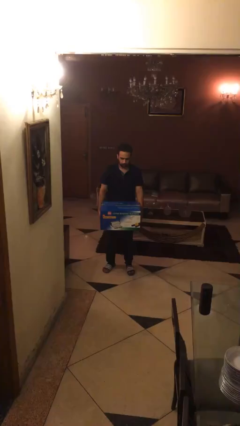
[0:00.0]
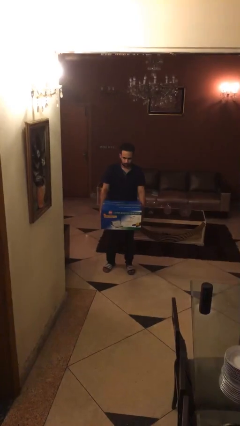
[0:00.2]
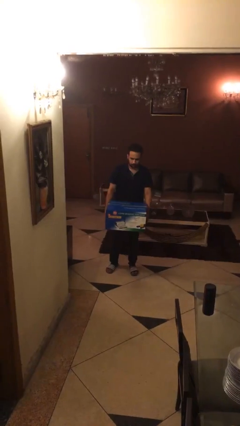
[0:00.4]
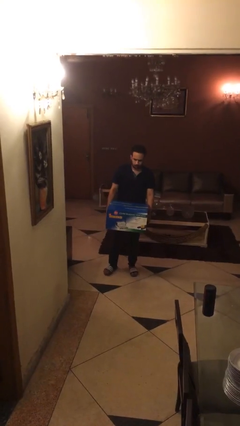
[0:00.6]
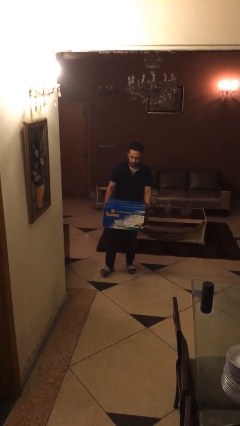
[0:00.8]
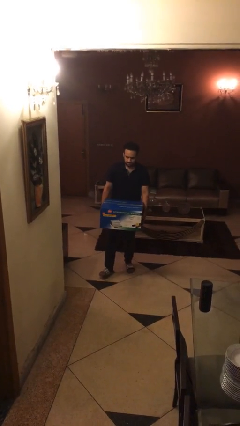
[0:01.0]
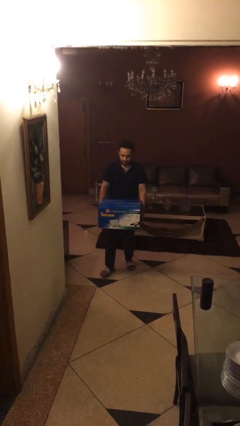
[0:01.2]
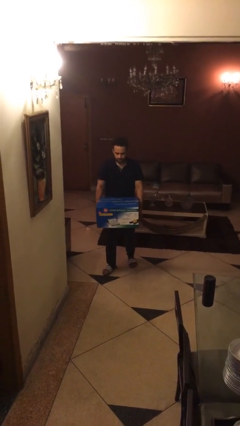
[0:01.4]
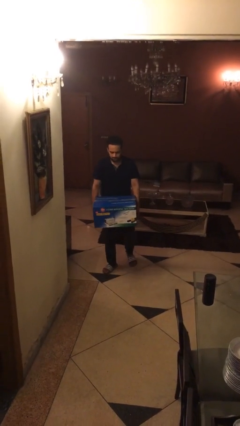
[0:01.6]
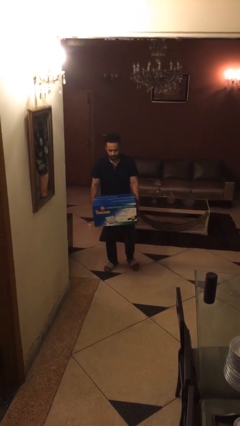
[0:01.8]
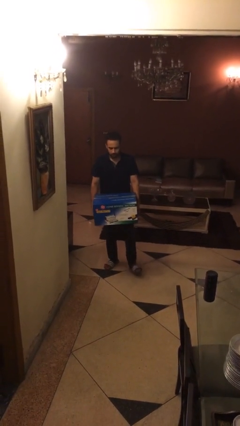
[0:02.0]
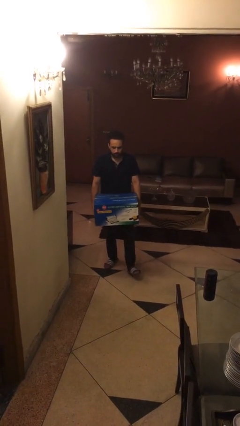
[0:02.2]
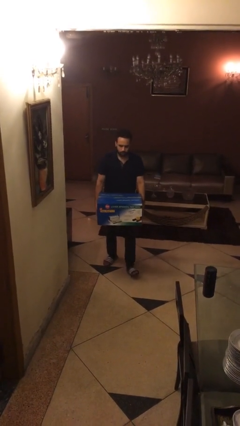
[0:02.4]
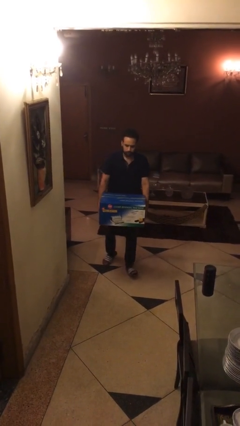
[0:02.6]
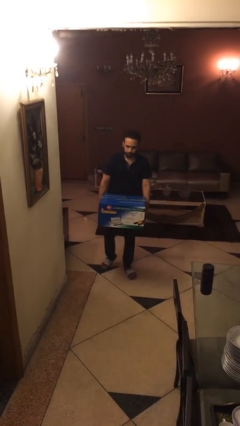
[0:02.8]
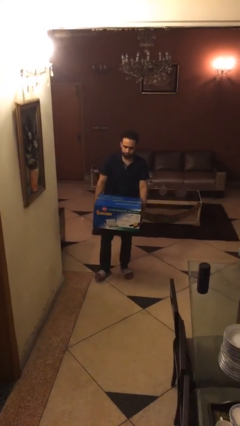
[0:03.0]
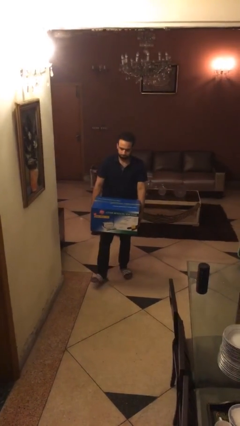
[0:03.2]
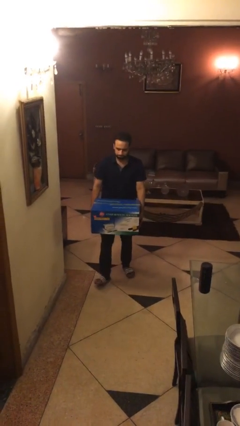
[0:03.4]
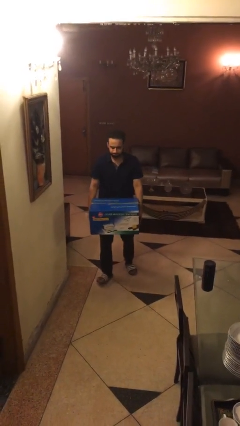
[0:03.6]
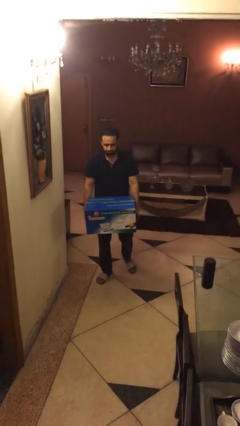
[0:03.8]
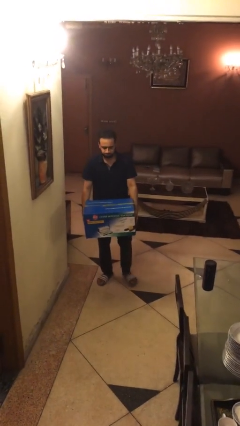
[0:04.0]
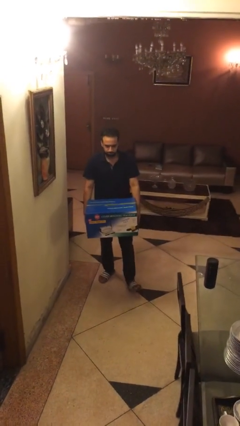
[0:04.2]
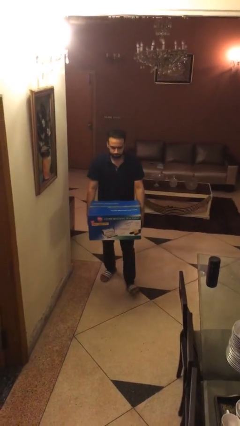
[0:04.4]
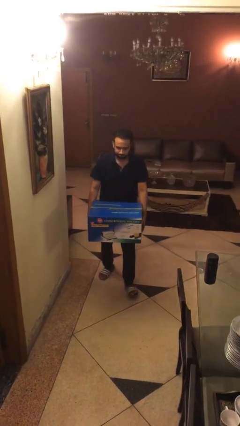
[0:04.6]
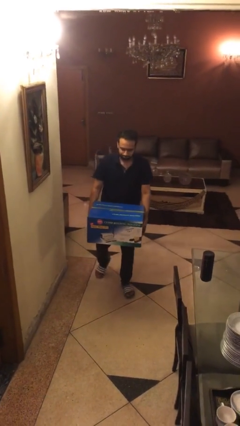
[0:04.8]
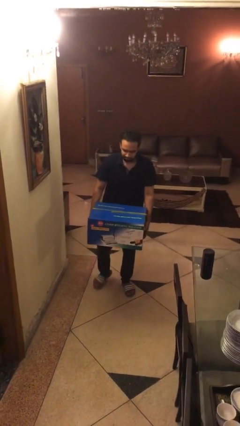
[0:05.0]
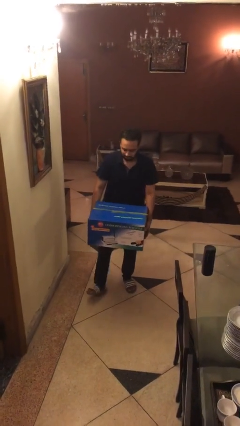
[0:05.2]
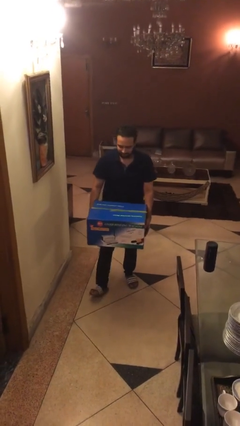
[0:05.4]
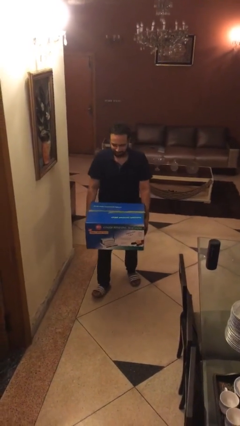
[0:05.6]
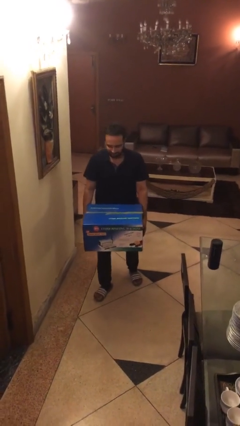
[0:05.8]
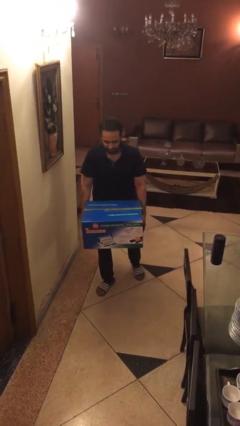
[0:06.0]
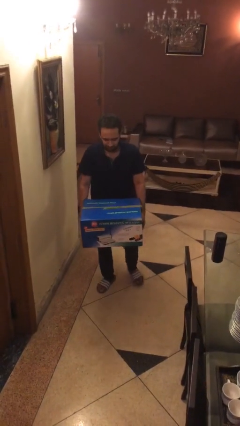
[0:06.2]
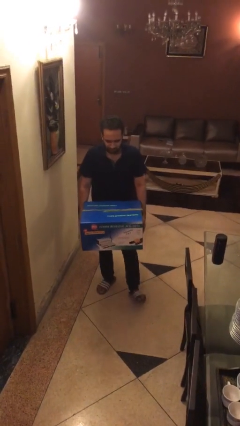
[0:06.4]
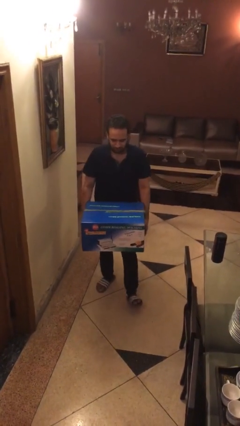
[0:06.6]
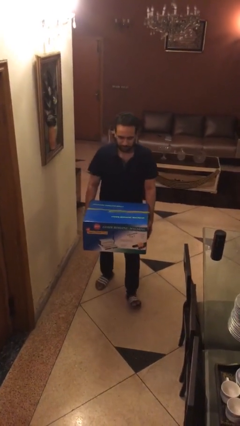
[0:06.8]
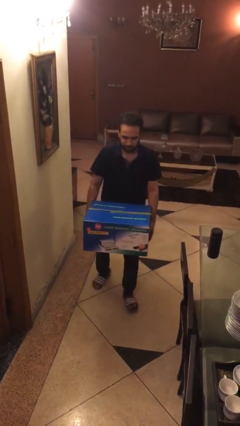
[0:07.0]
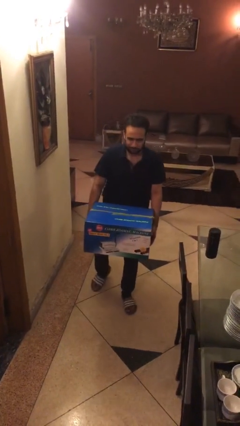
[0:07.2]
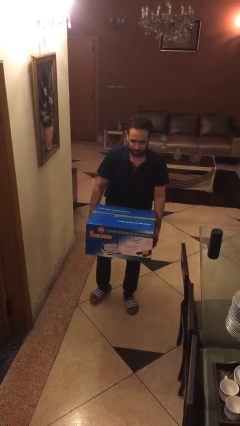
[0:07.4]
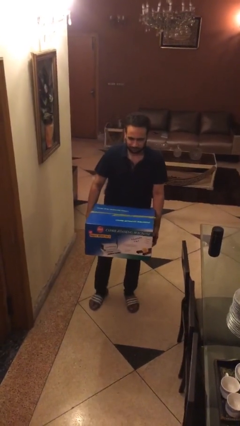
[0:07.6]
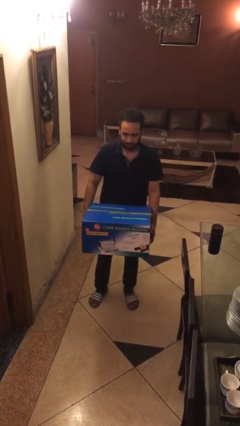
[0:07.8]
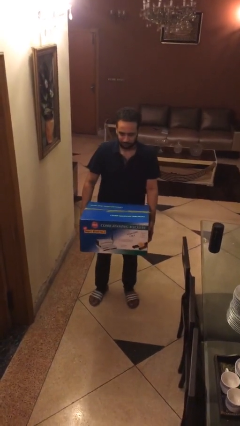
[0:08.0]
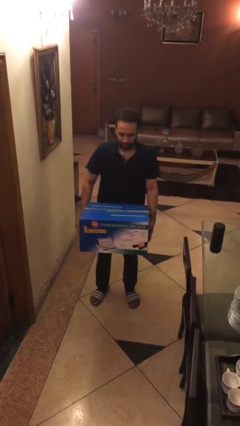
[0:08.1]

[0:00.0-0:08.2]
person carries heavy object

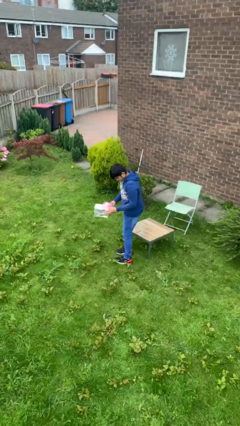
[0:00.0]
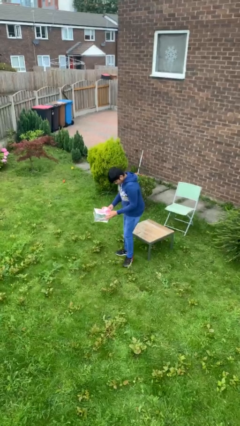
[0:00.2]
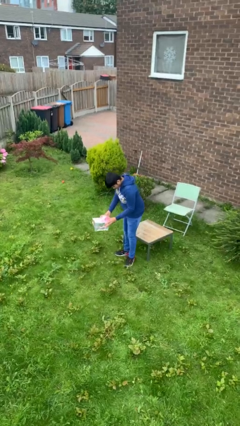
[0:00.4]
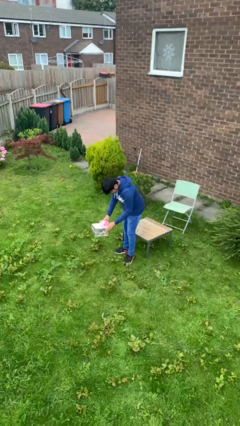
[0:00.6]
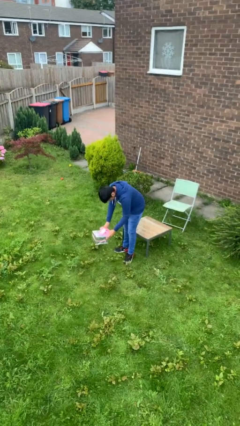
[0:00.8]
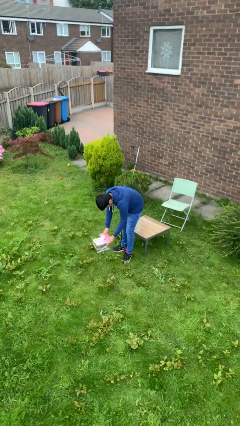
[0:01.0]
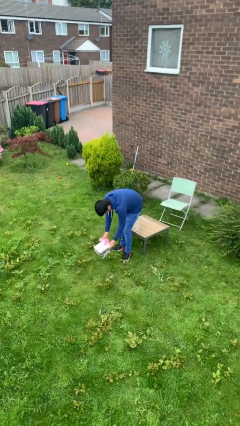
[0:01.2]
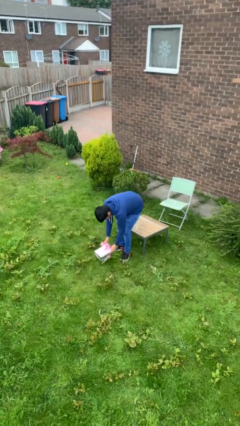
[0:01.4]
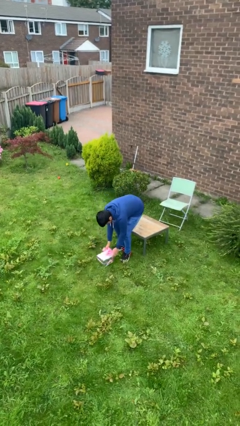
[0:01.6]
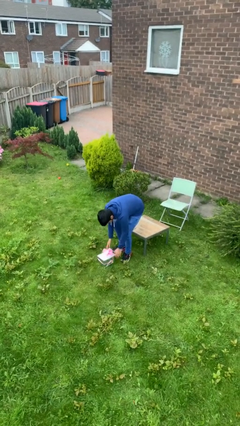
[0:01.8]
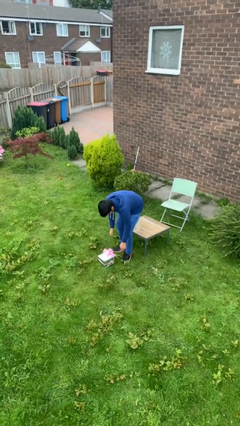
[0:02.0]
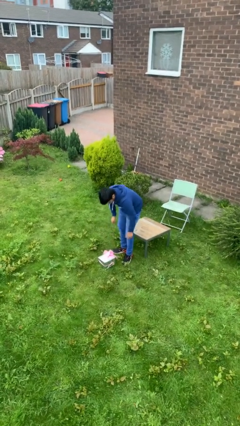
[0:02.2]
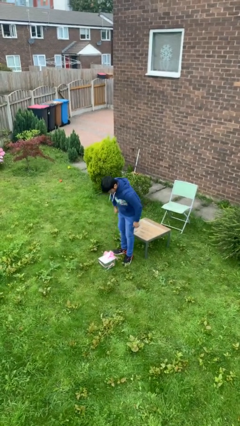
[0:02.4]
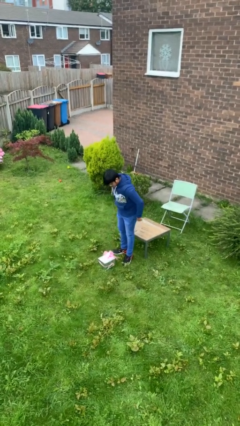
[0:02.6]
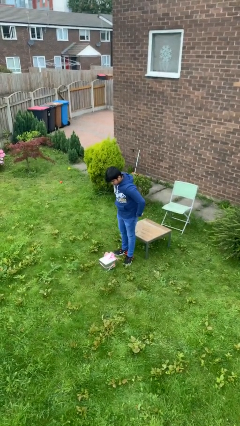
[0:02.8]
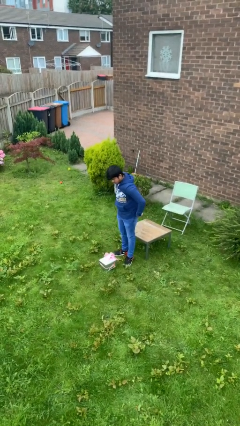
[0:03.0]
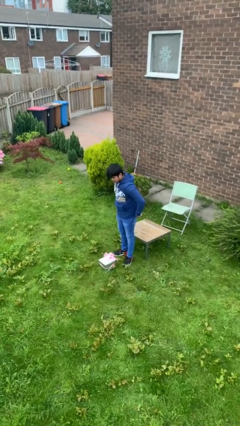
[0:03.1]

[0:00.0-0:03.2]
person puts down object on floor

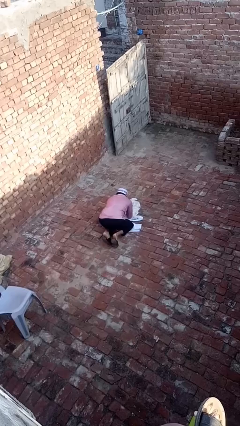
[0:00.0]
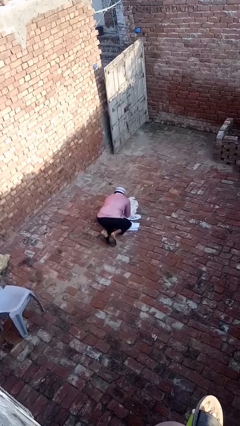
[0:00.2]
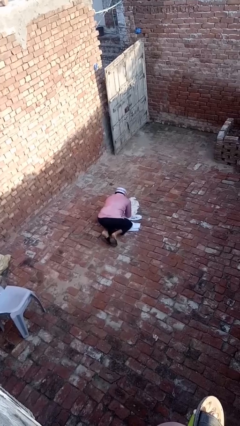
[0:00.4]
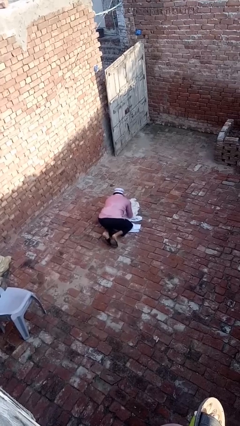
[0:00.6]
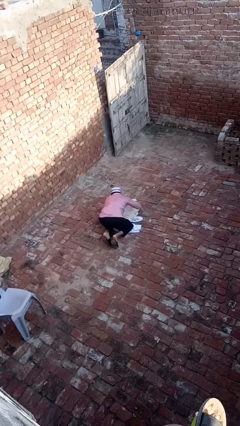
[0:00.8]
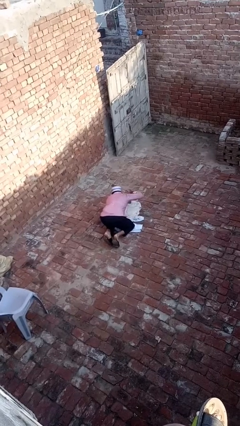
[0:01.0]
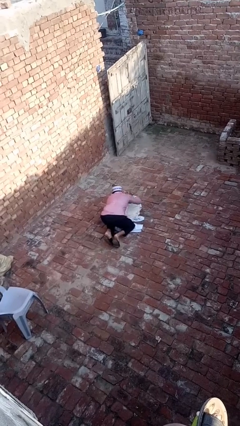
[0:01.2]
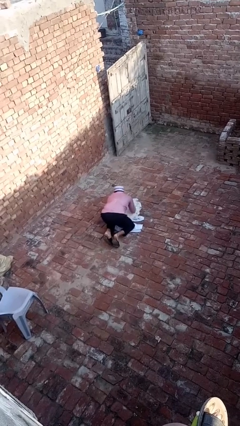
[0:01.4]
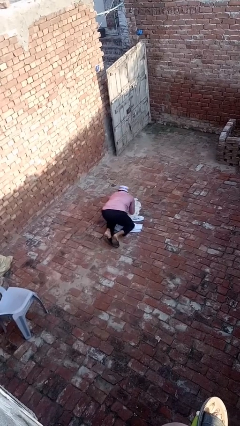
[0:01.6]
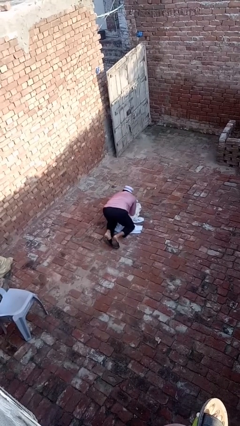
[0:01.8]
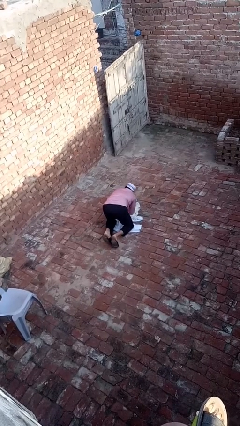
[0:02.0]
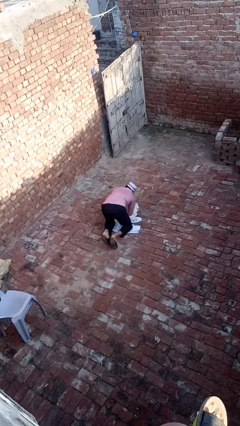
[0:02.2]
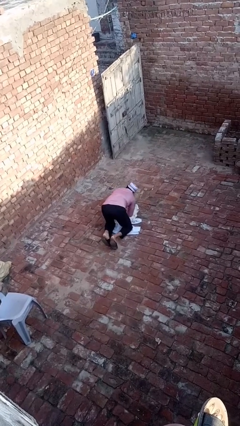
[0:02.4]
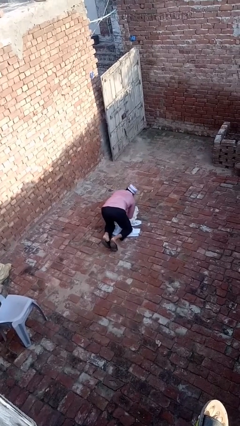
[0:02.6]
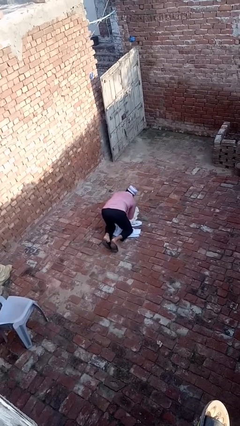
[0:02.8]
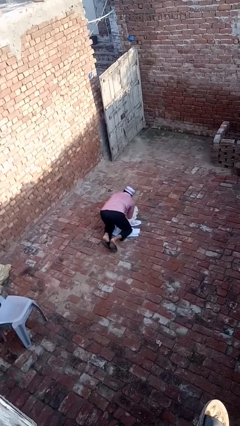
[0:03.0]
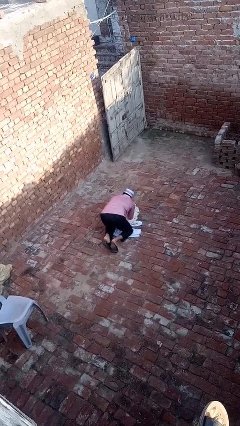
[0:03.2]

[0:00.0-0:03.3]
person crawls

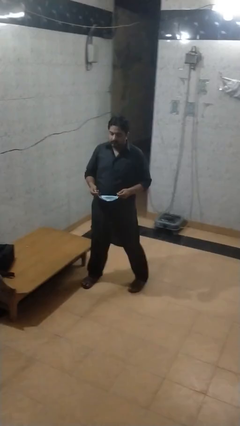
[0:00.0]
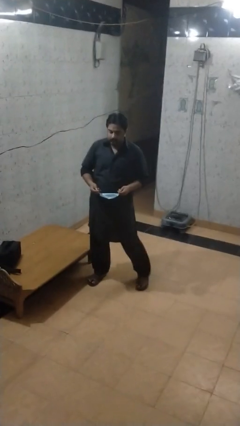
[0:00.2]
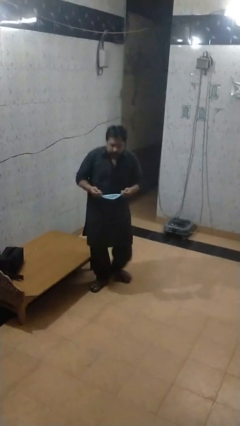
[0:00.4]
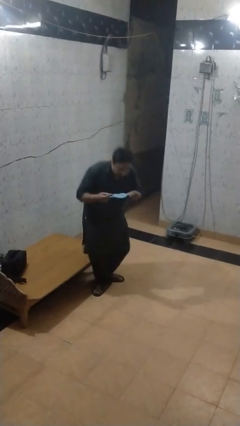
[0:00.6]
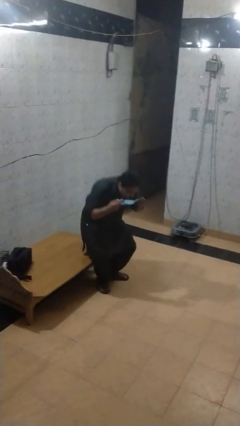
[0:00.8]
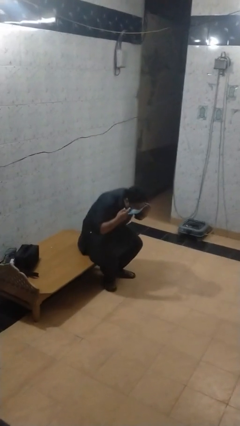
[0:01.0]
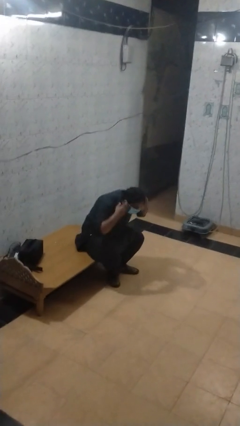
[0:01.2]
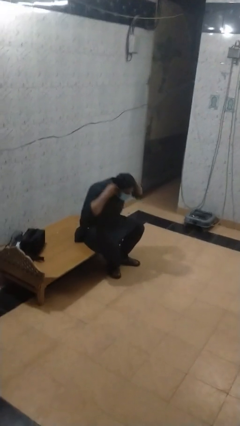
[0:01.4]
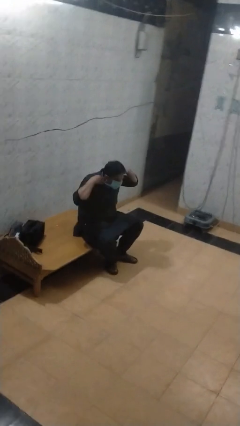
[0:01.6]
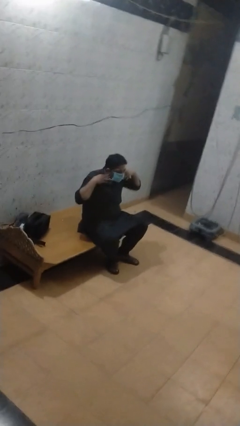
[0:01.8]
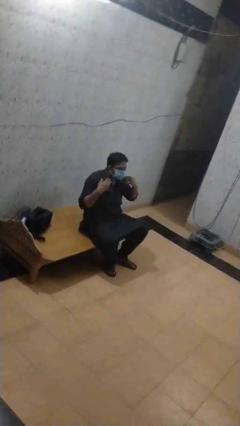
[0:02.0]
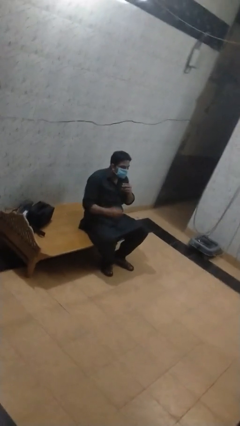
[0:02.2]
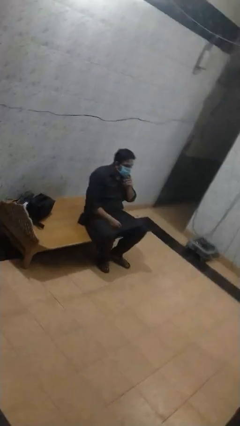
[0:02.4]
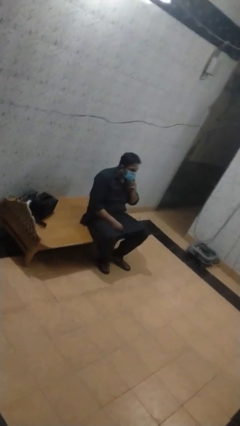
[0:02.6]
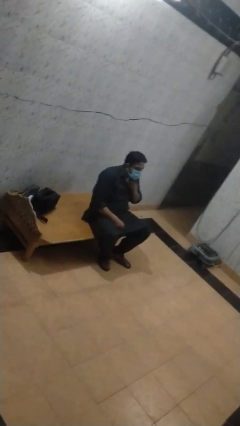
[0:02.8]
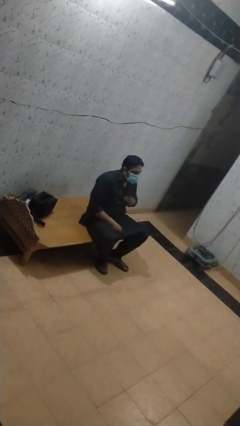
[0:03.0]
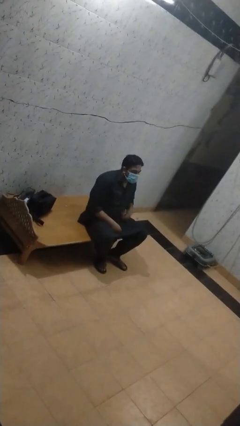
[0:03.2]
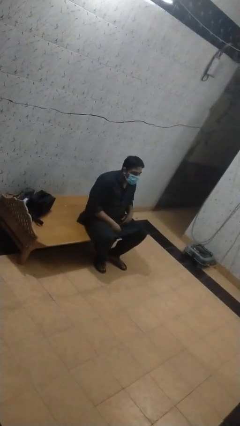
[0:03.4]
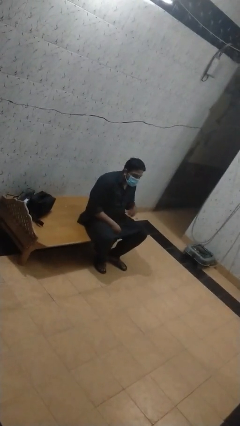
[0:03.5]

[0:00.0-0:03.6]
person puts on facemask
